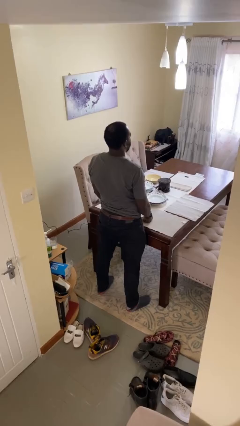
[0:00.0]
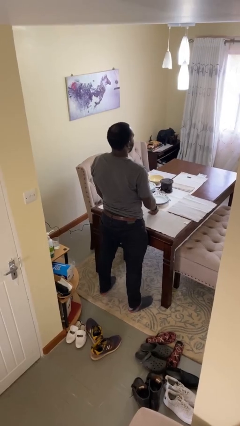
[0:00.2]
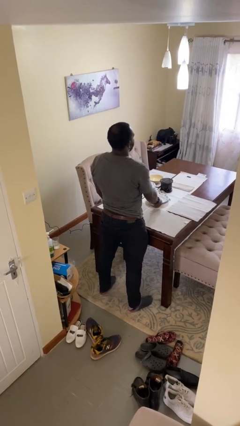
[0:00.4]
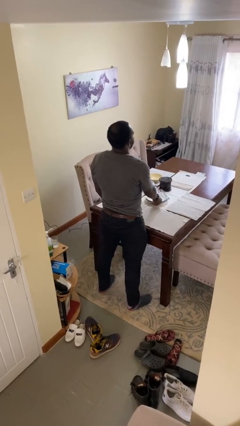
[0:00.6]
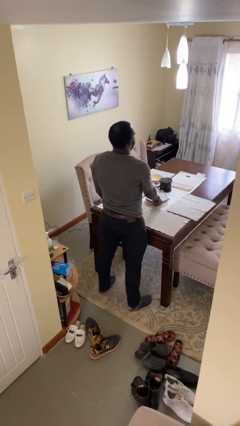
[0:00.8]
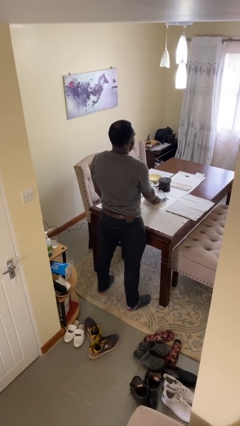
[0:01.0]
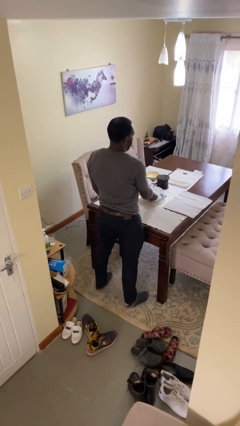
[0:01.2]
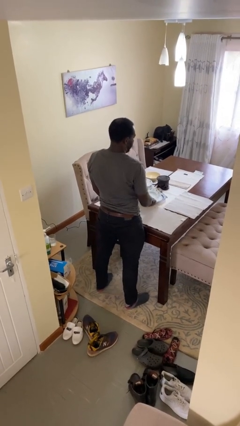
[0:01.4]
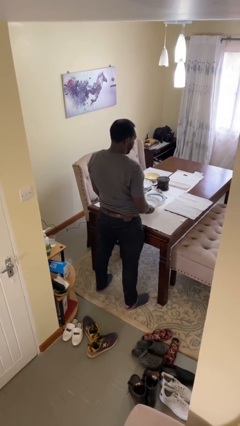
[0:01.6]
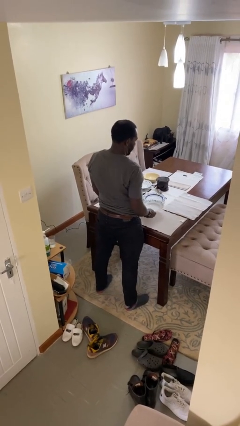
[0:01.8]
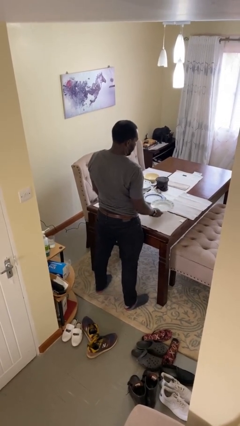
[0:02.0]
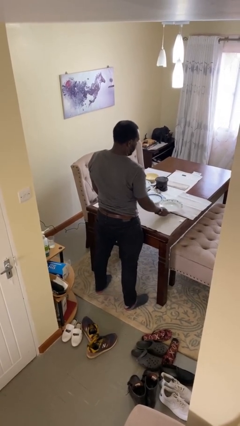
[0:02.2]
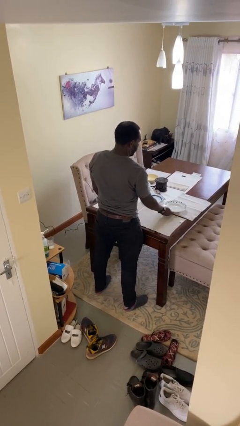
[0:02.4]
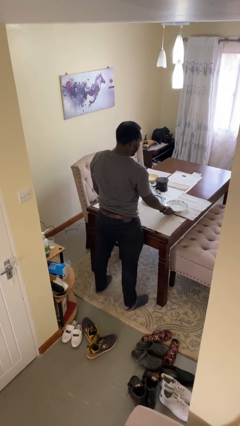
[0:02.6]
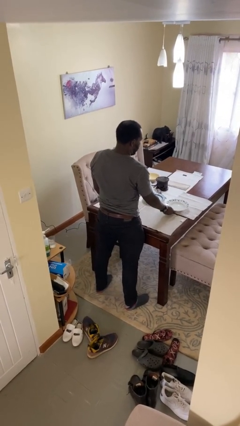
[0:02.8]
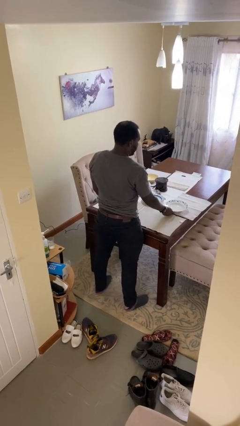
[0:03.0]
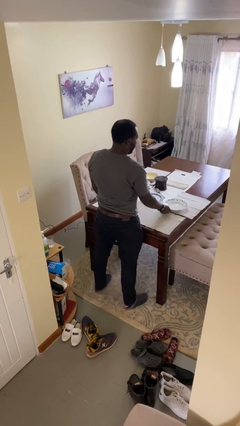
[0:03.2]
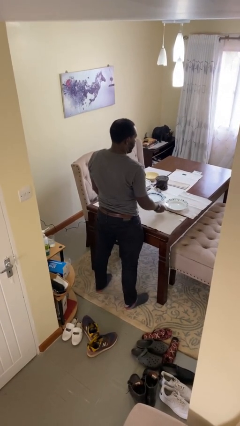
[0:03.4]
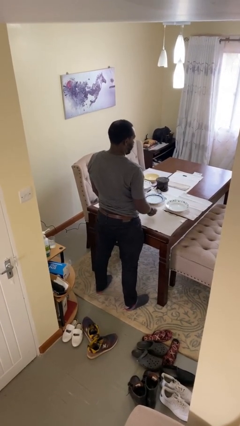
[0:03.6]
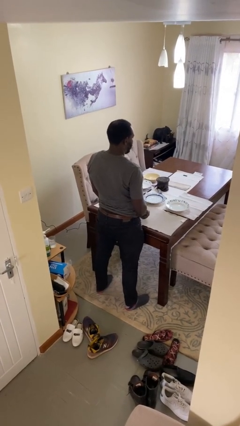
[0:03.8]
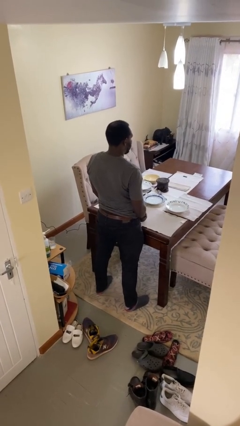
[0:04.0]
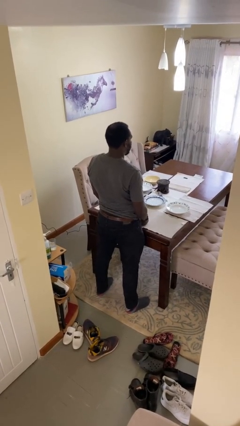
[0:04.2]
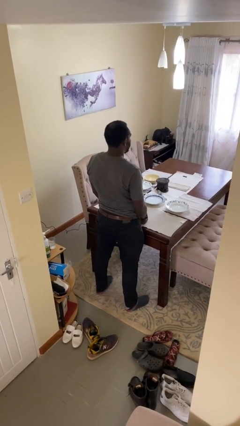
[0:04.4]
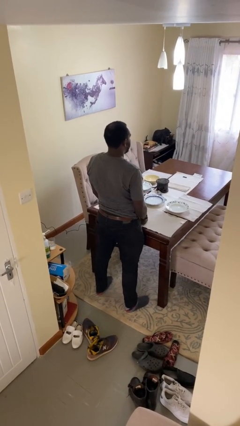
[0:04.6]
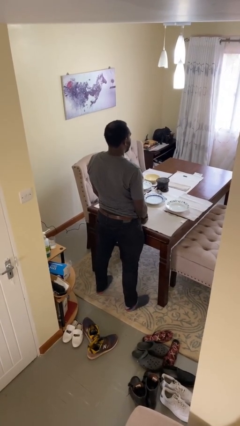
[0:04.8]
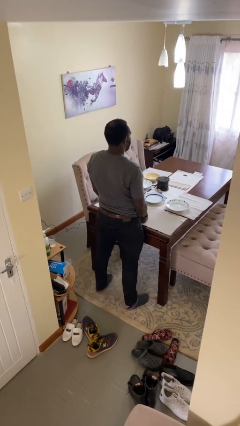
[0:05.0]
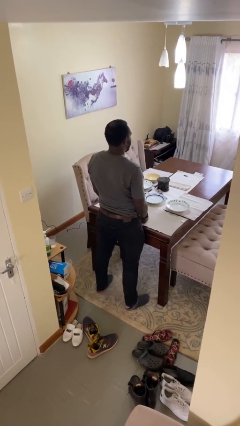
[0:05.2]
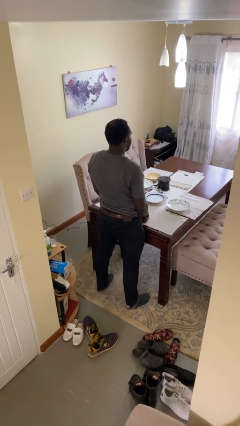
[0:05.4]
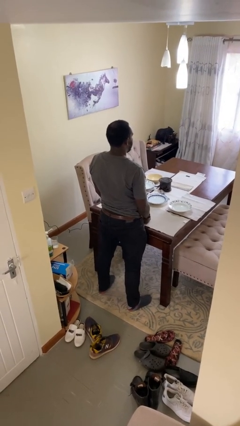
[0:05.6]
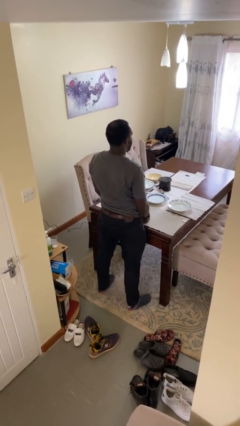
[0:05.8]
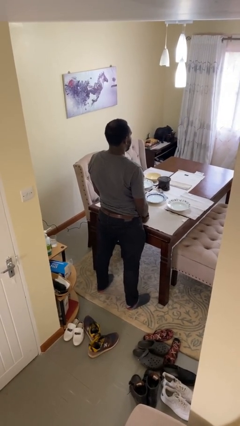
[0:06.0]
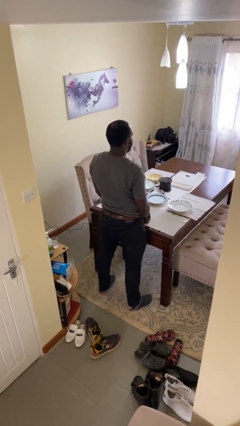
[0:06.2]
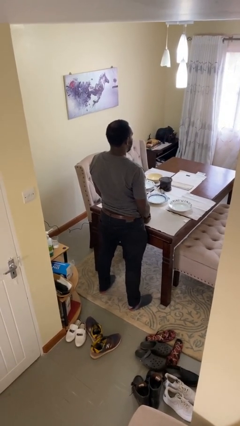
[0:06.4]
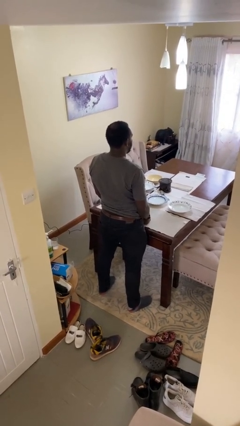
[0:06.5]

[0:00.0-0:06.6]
person sets table

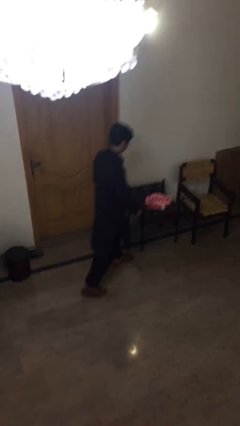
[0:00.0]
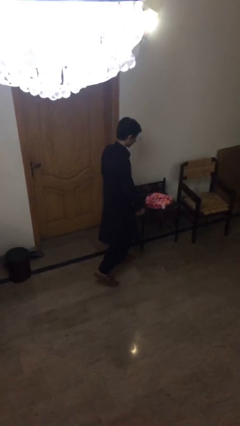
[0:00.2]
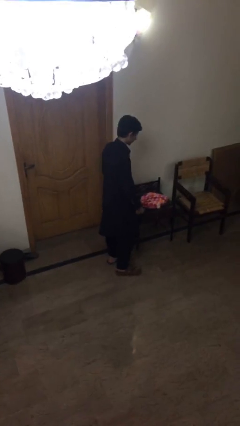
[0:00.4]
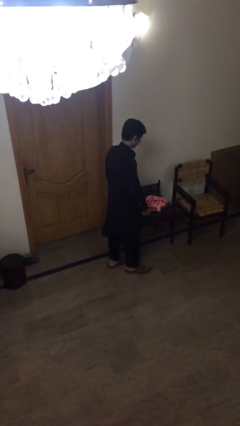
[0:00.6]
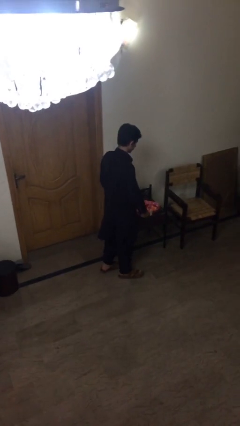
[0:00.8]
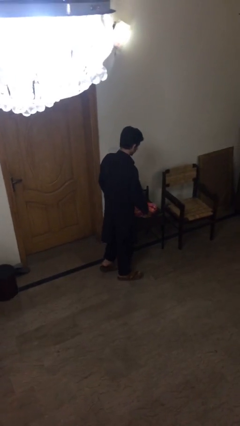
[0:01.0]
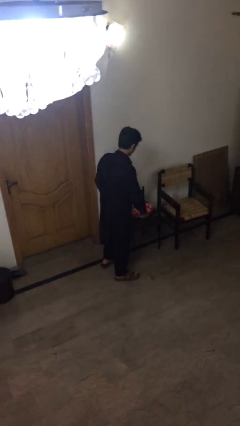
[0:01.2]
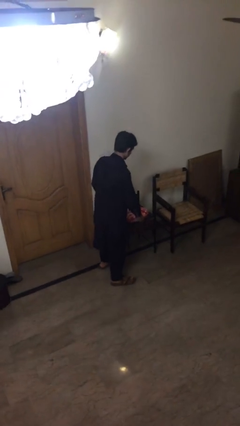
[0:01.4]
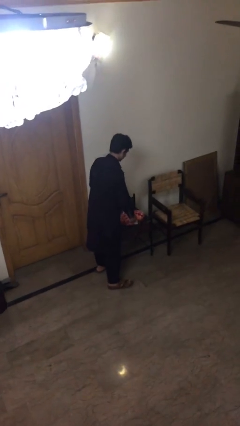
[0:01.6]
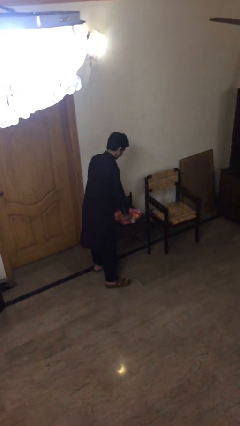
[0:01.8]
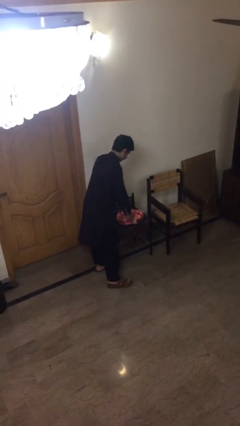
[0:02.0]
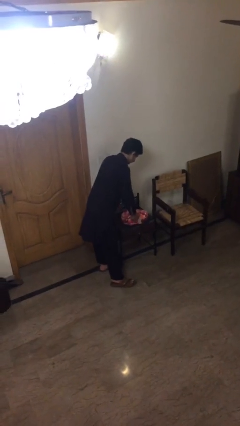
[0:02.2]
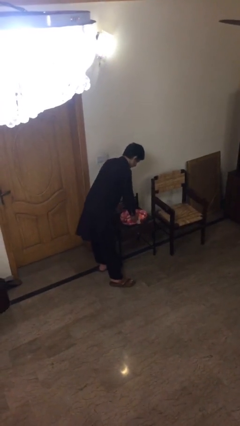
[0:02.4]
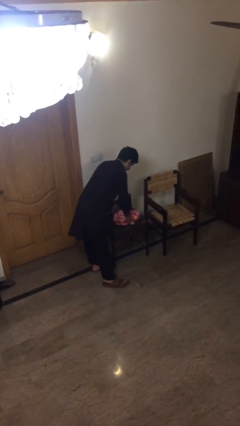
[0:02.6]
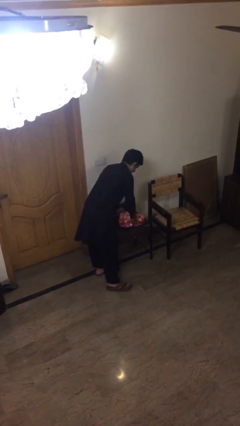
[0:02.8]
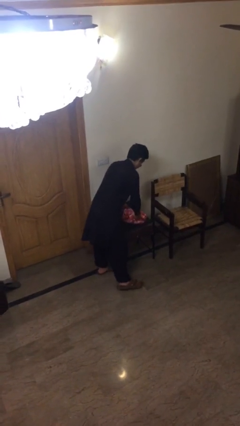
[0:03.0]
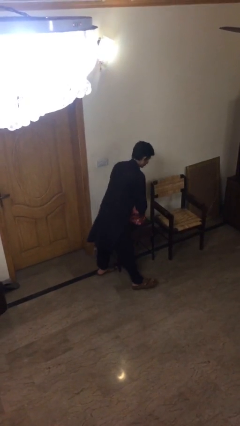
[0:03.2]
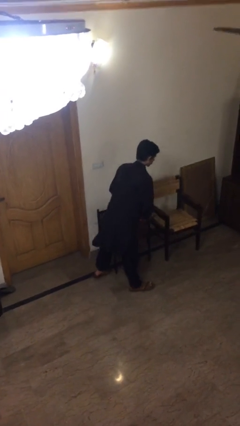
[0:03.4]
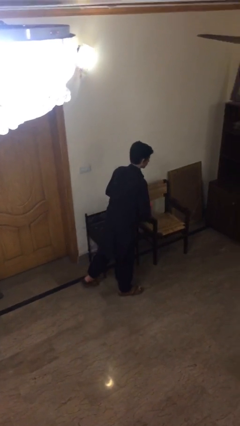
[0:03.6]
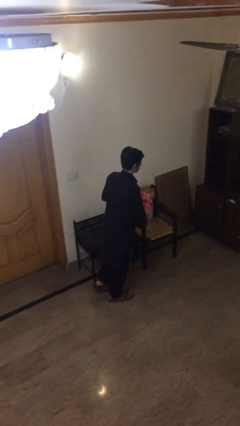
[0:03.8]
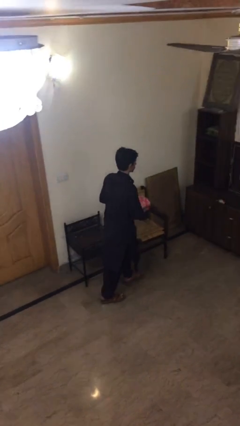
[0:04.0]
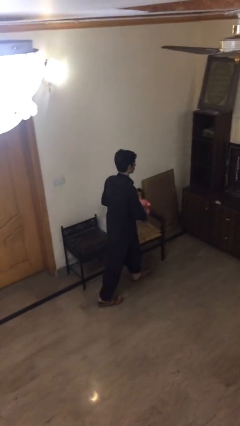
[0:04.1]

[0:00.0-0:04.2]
person picks up object from table

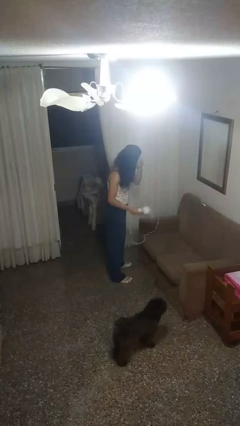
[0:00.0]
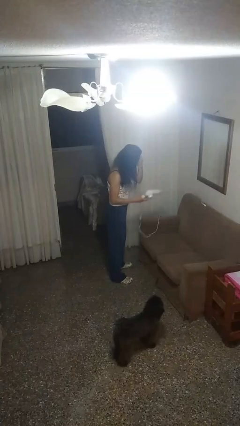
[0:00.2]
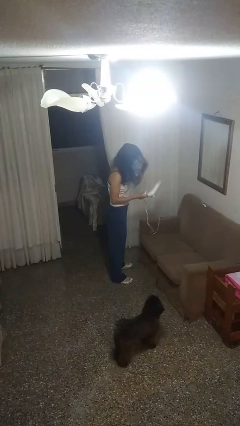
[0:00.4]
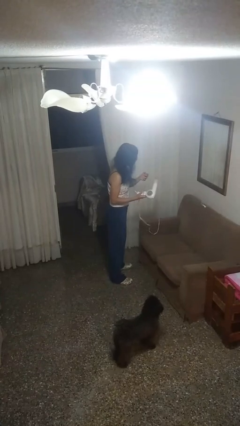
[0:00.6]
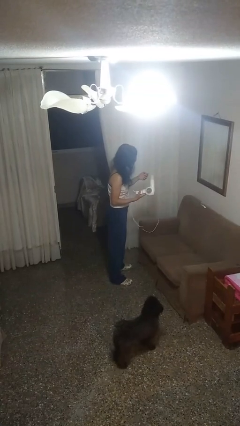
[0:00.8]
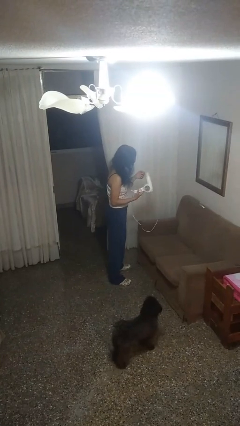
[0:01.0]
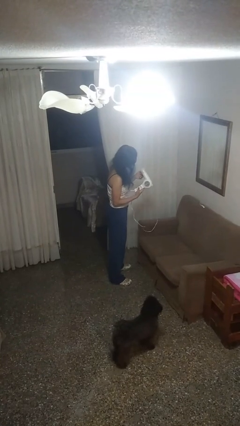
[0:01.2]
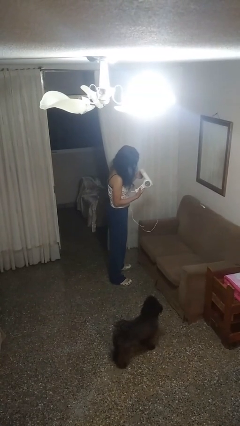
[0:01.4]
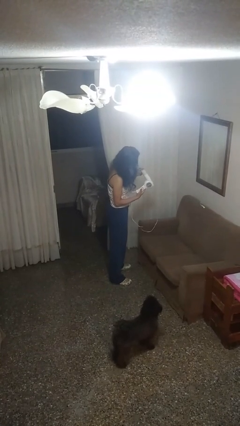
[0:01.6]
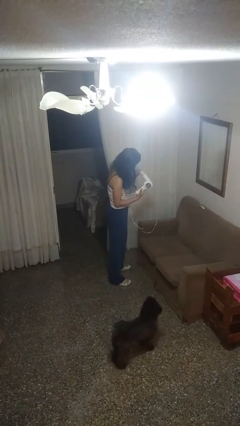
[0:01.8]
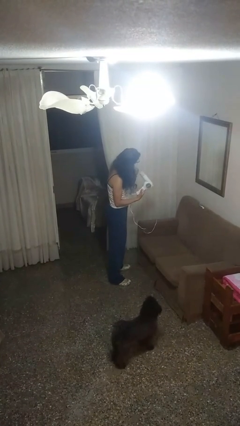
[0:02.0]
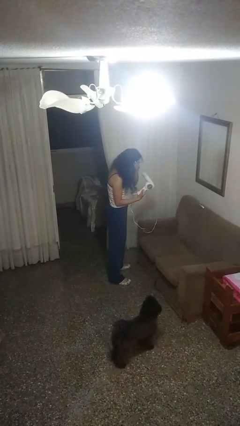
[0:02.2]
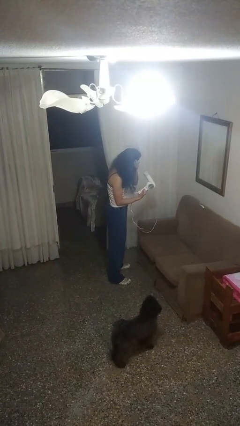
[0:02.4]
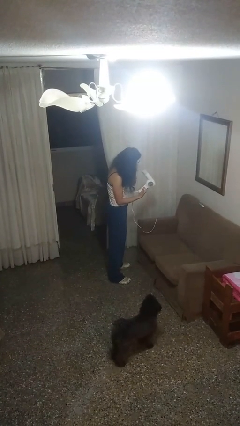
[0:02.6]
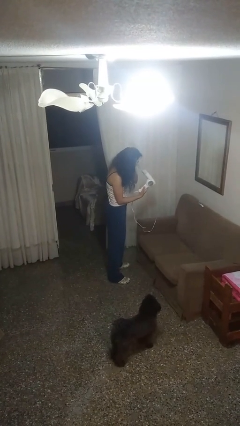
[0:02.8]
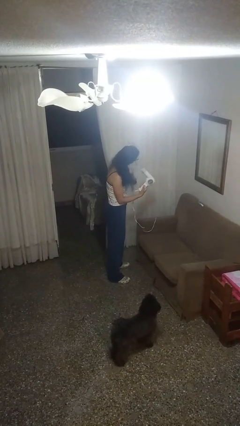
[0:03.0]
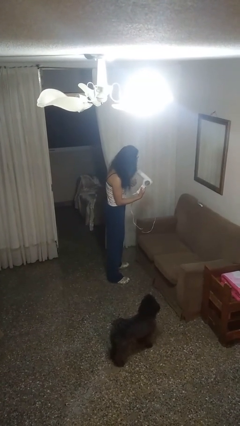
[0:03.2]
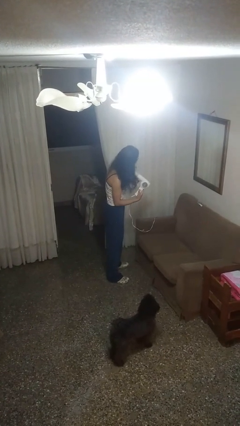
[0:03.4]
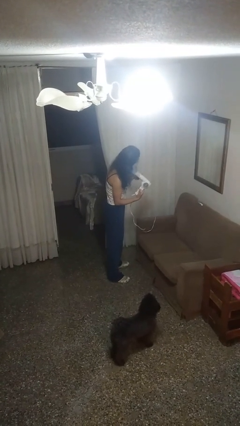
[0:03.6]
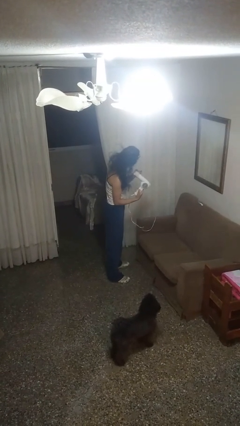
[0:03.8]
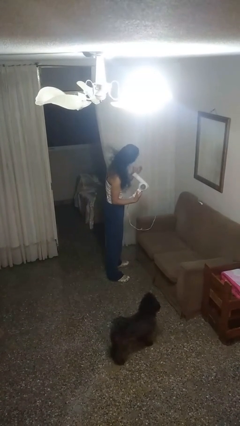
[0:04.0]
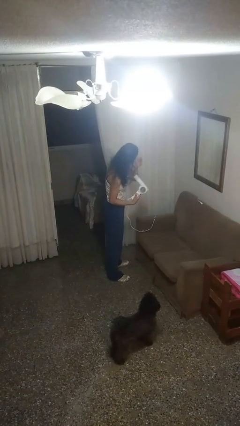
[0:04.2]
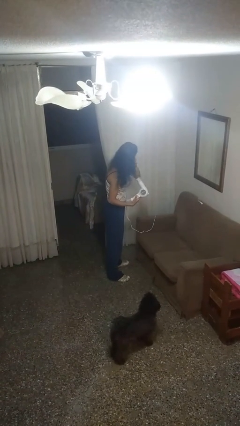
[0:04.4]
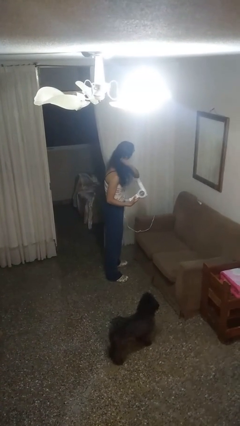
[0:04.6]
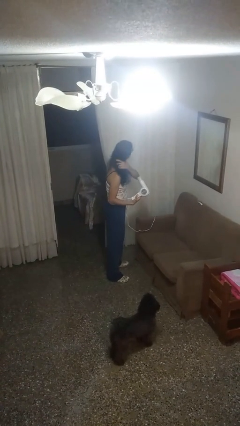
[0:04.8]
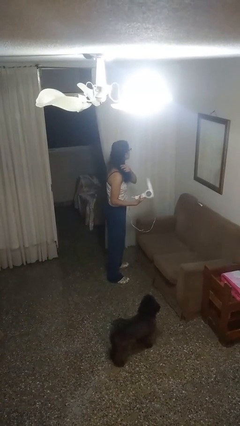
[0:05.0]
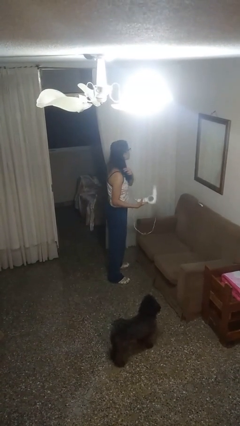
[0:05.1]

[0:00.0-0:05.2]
person dries hair with hairdryer

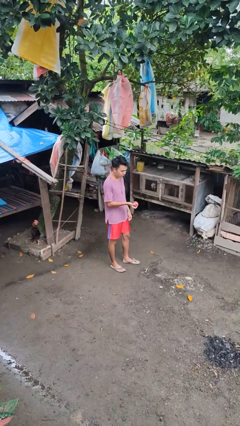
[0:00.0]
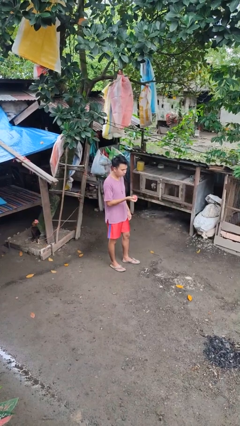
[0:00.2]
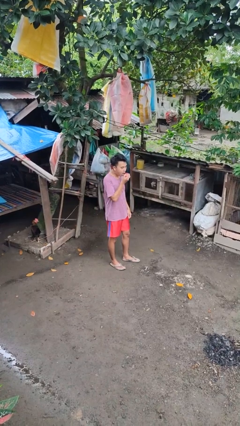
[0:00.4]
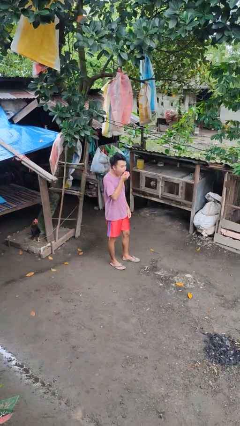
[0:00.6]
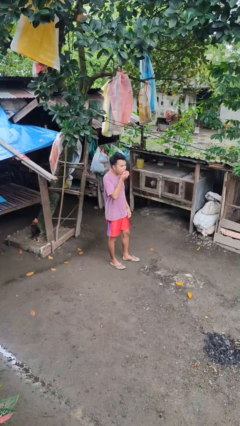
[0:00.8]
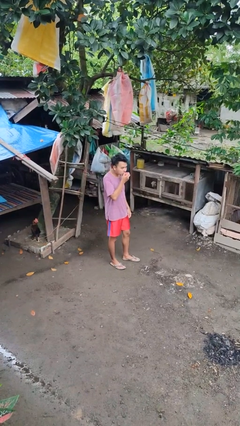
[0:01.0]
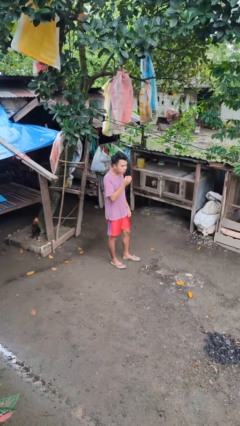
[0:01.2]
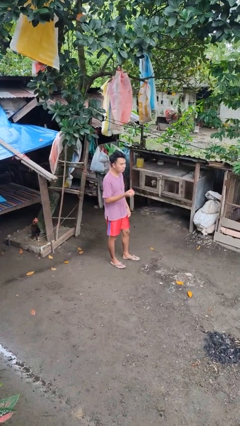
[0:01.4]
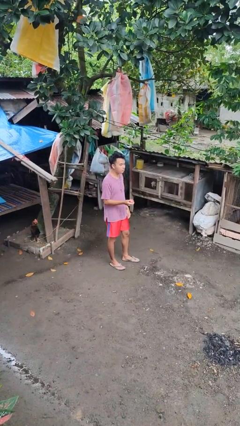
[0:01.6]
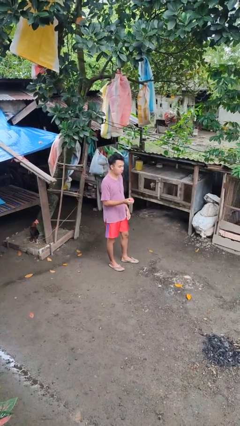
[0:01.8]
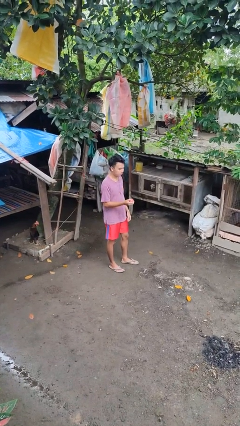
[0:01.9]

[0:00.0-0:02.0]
person eats apple
